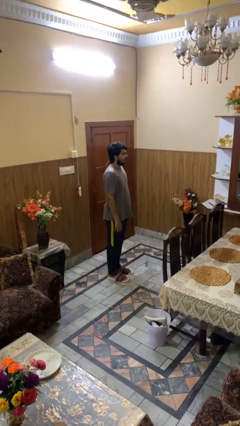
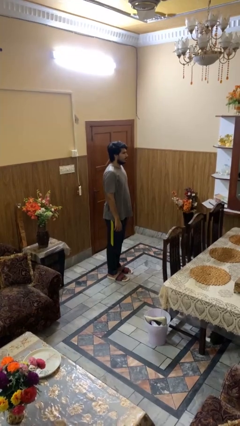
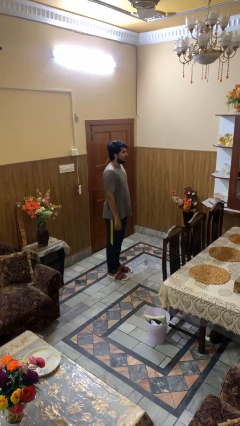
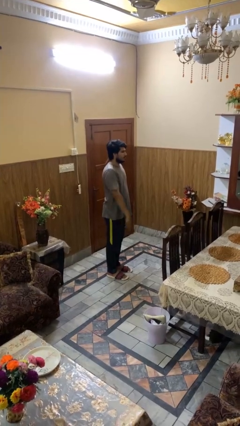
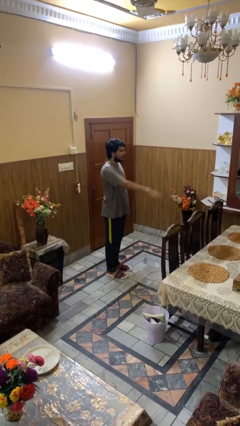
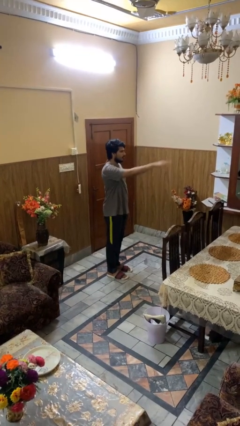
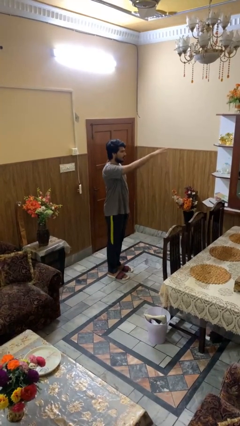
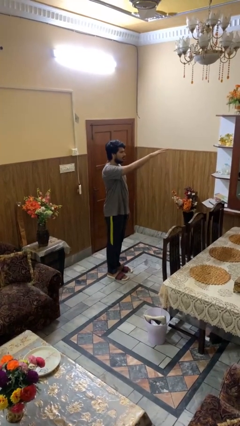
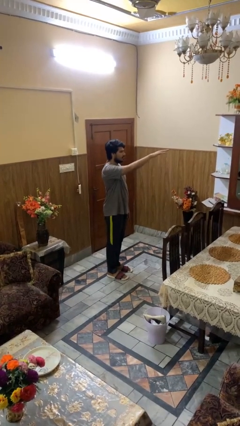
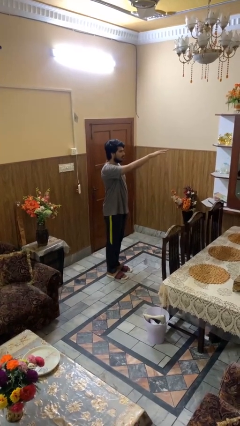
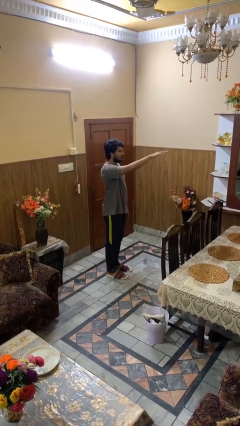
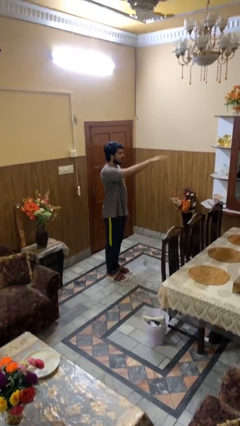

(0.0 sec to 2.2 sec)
person gestures swipe up

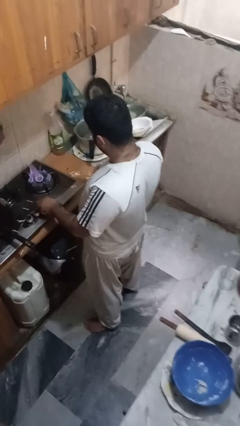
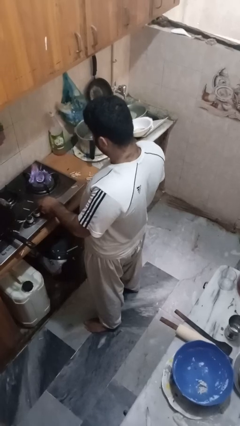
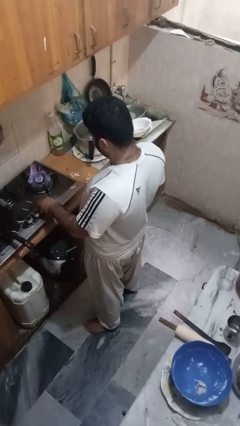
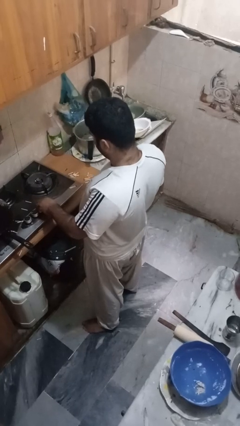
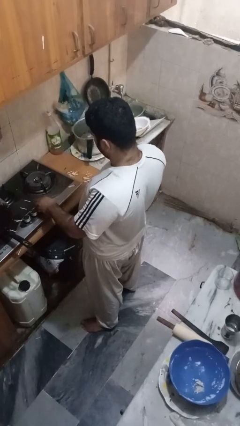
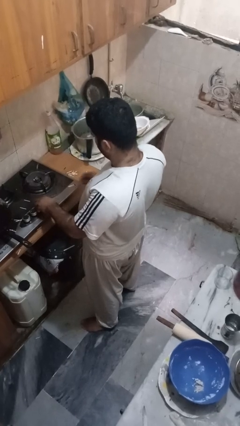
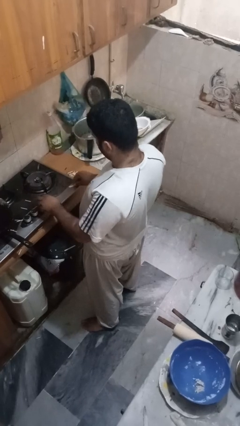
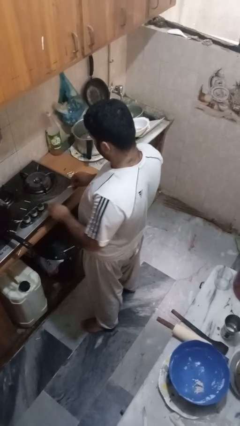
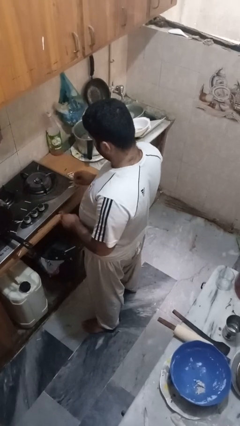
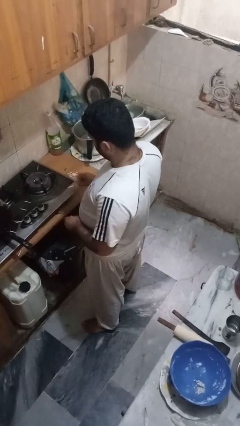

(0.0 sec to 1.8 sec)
person turns off stovetop

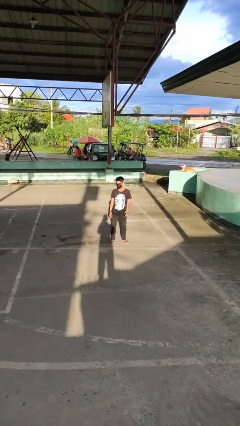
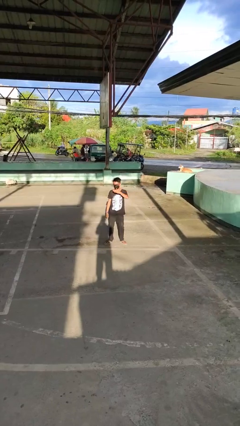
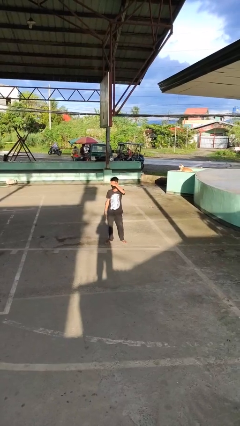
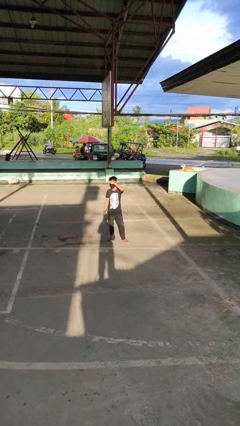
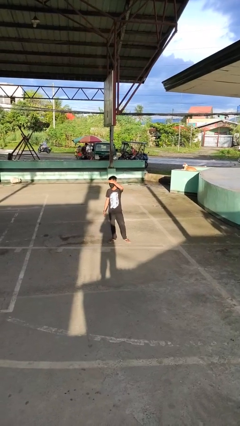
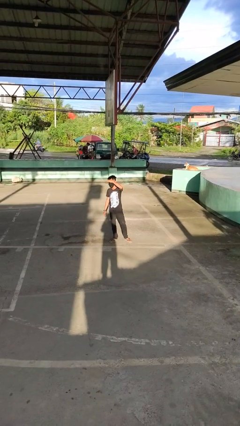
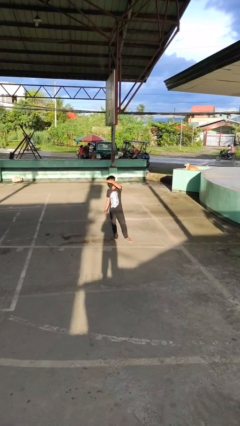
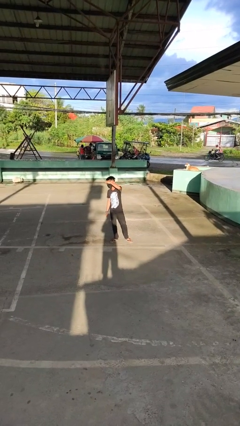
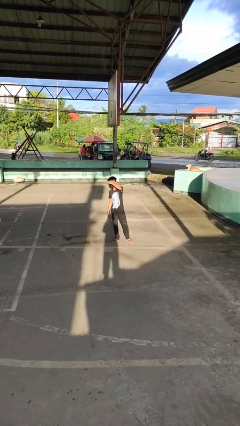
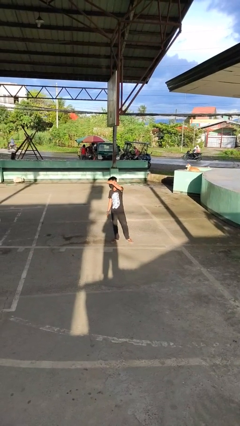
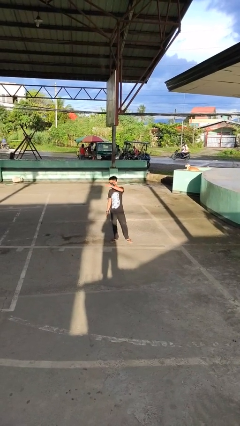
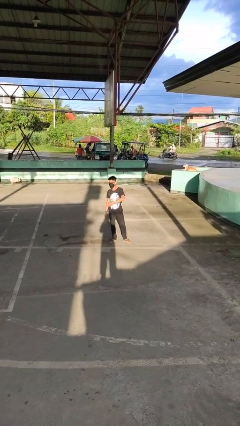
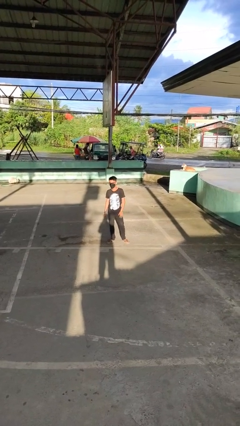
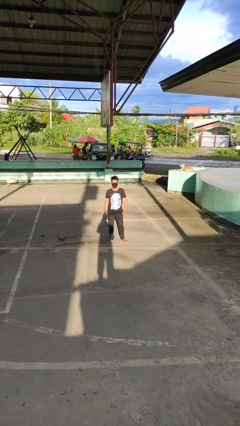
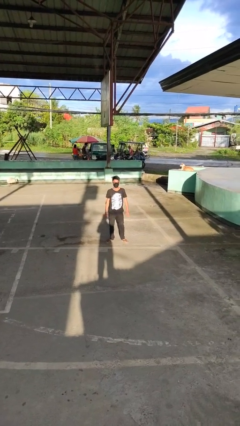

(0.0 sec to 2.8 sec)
person shades eyes

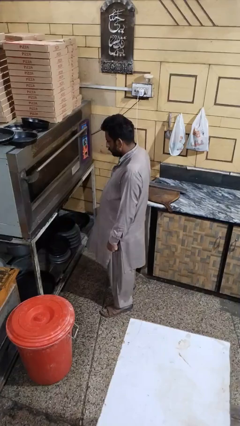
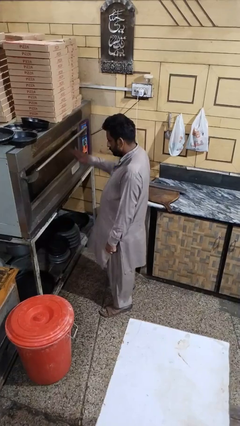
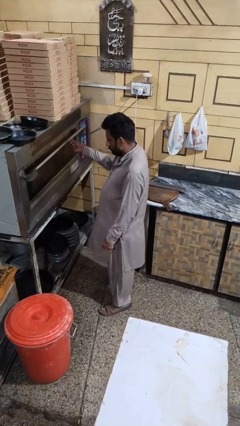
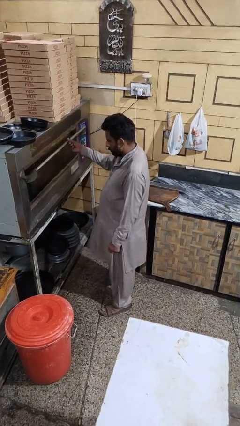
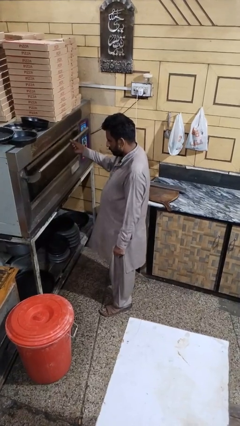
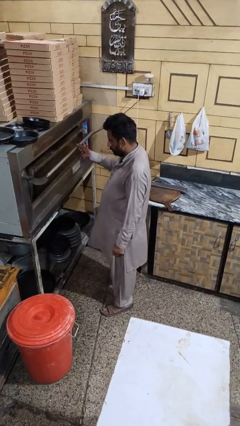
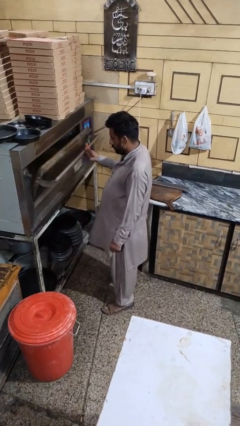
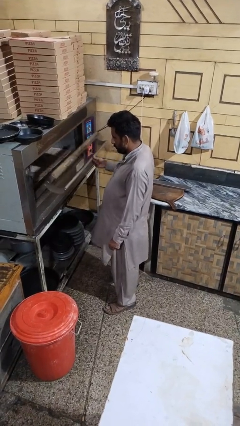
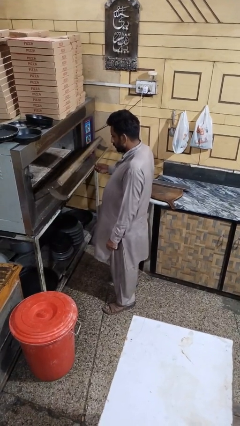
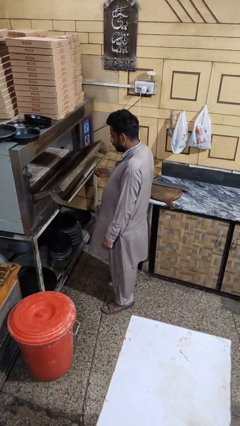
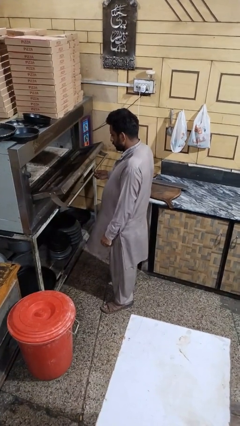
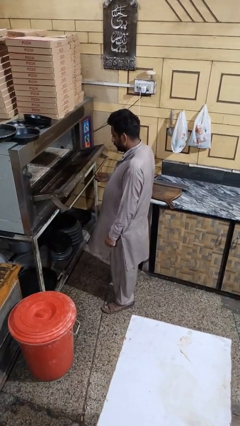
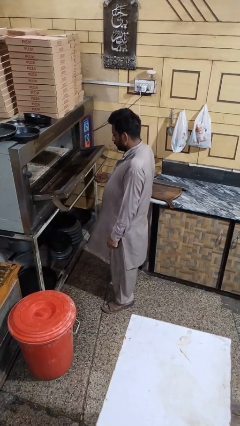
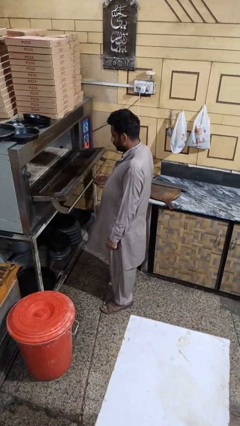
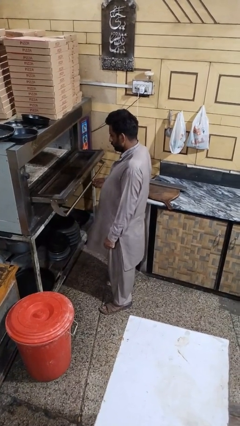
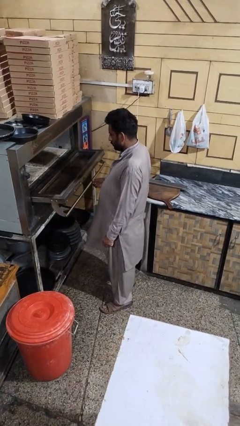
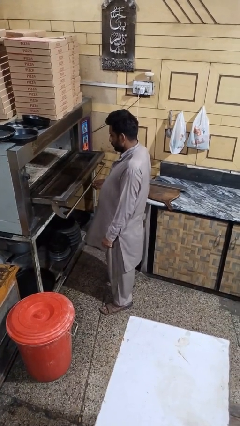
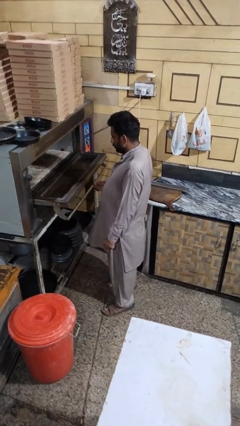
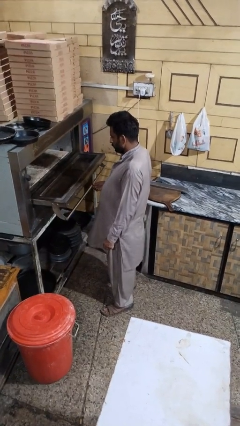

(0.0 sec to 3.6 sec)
person opens microwave

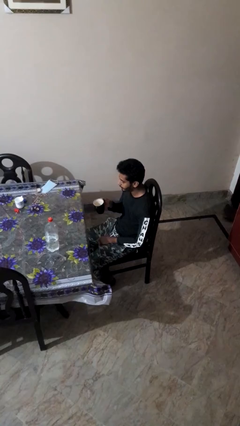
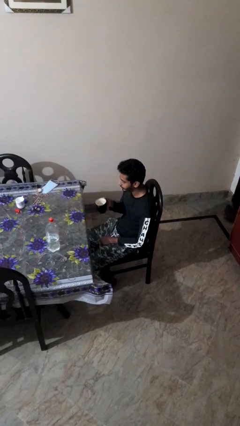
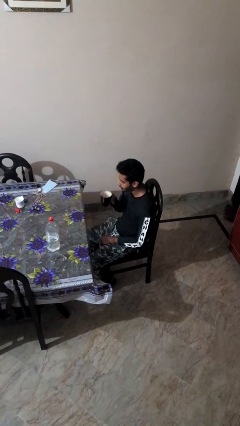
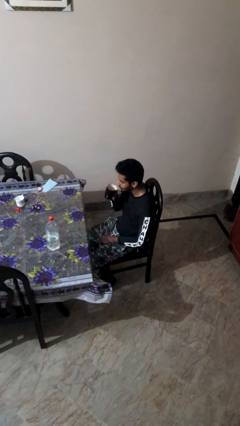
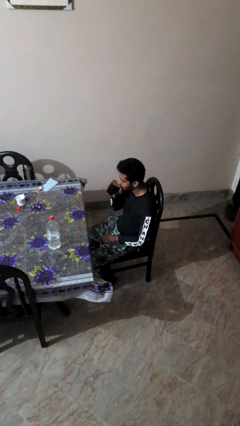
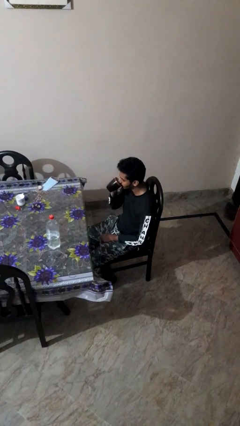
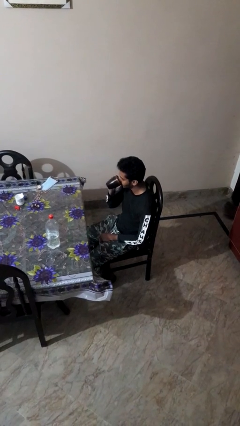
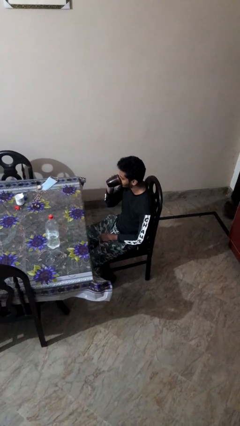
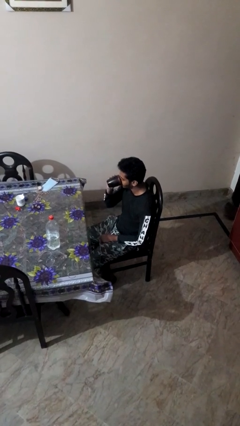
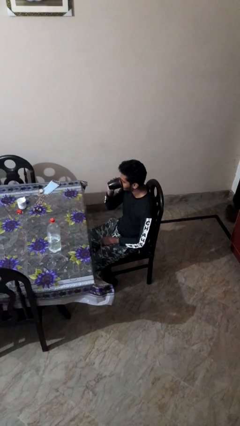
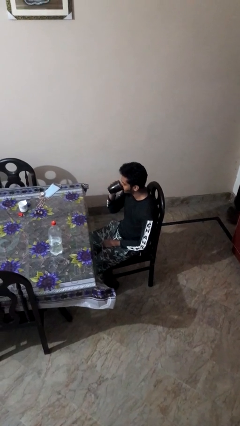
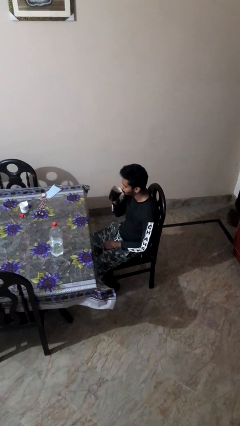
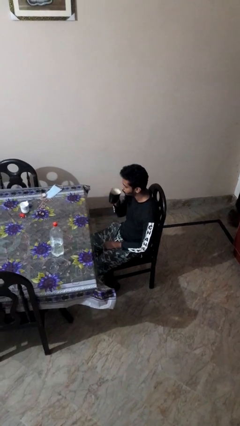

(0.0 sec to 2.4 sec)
person drinks from mug

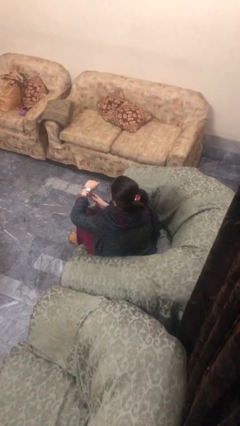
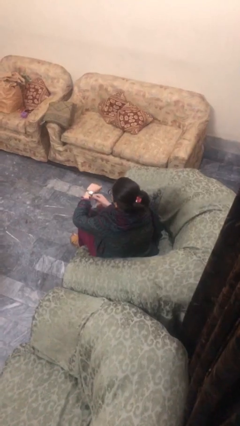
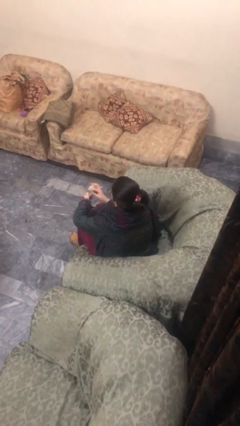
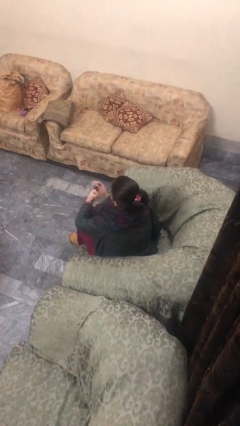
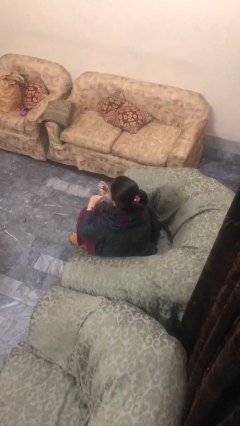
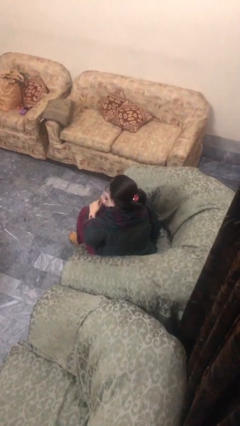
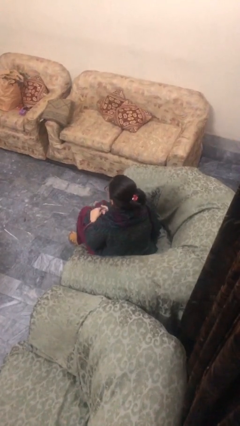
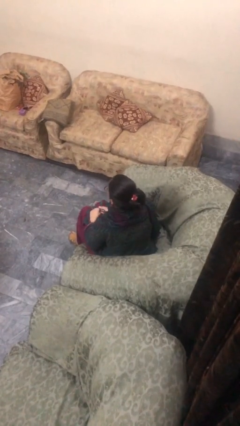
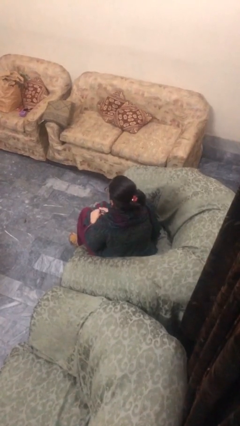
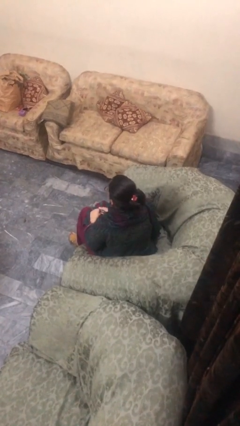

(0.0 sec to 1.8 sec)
person takes off wristwatch

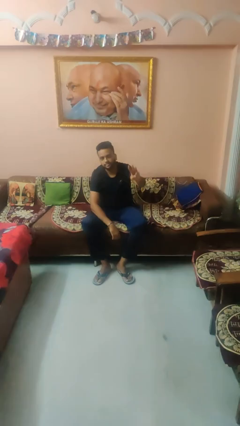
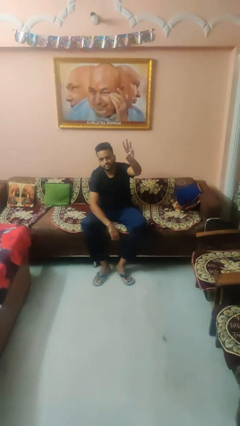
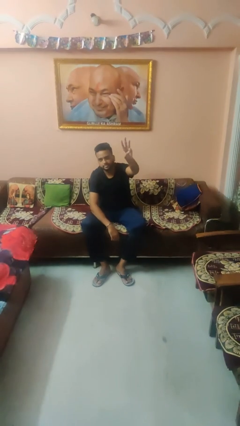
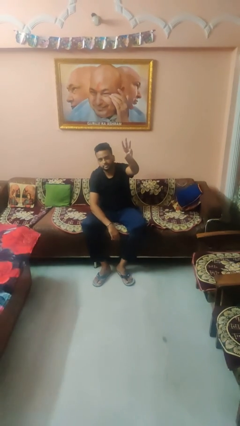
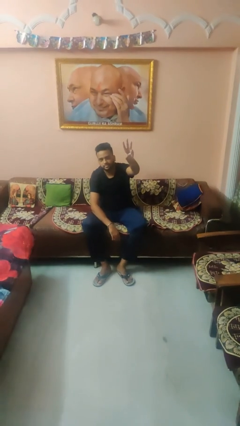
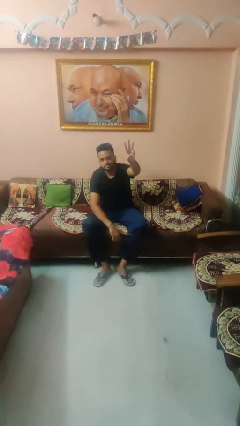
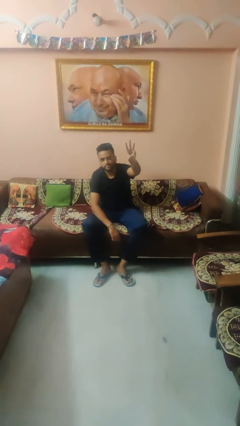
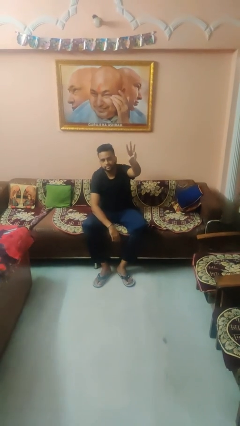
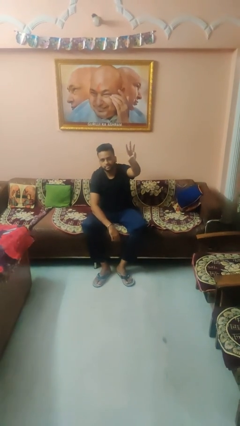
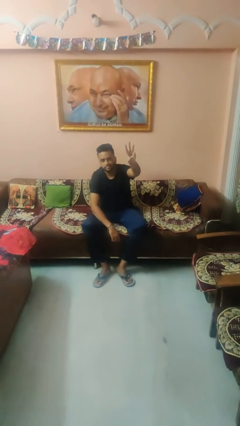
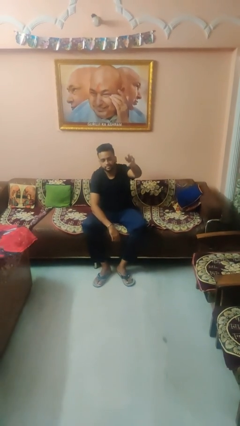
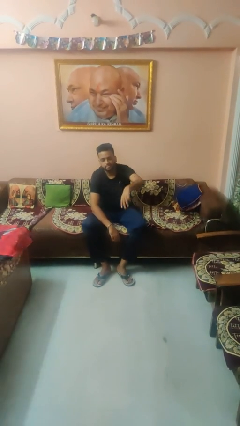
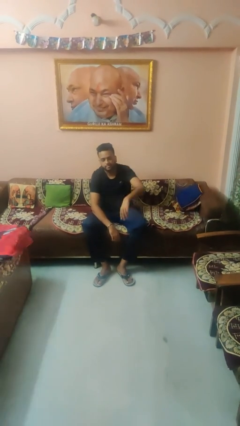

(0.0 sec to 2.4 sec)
person gestures number three
